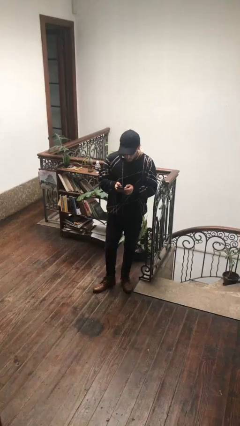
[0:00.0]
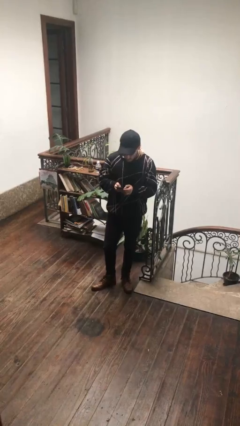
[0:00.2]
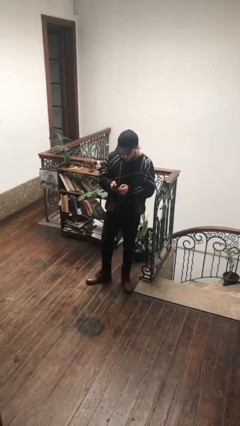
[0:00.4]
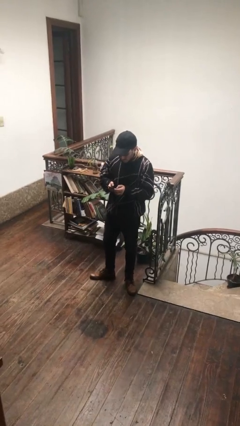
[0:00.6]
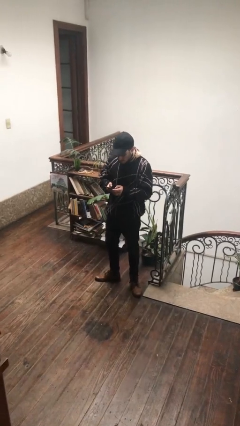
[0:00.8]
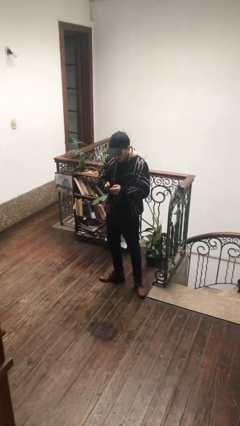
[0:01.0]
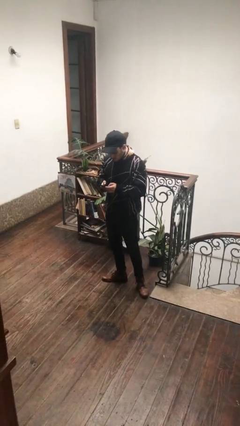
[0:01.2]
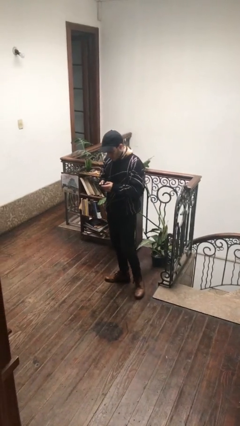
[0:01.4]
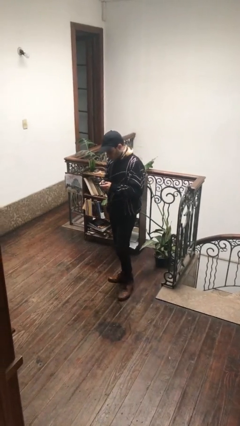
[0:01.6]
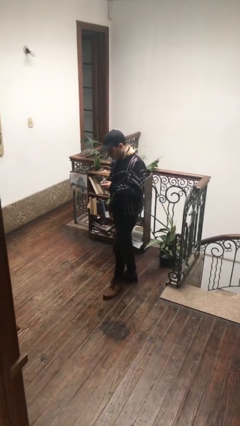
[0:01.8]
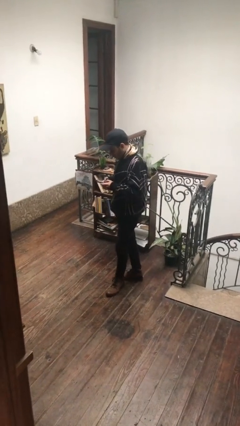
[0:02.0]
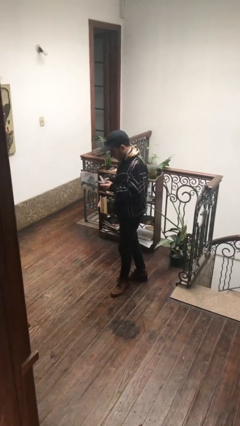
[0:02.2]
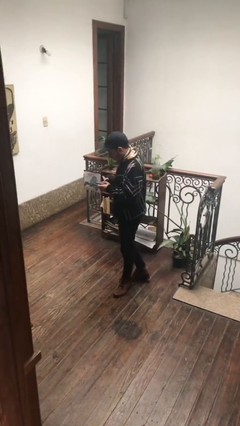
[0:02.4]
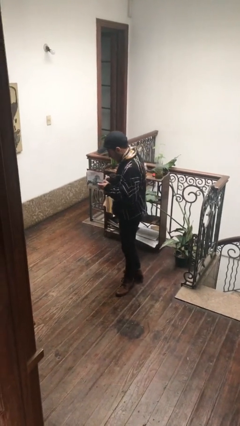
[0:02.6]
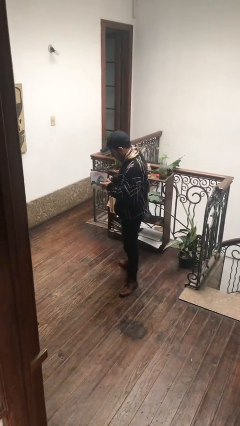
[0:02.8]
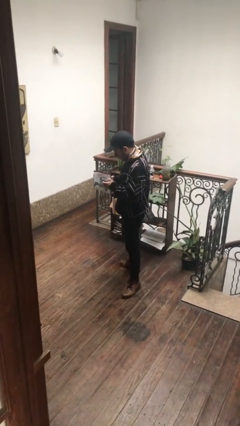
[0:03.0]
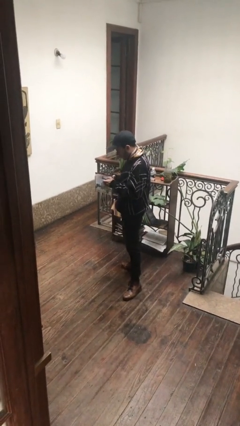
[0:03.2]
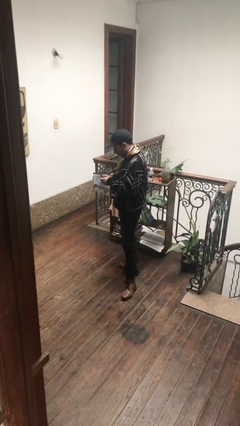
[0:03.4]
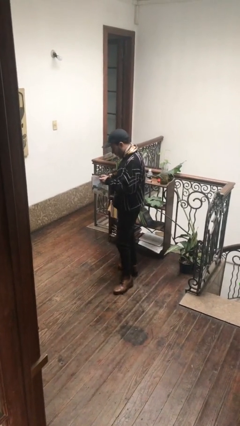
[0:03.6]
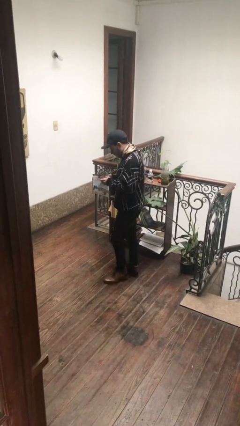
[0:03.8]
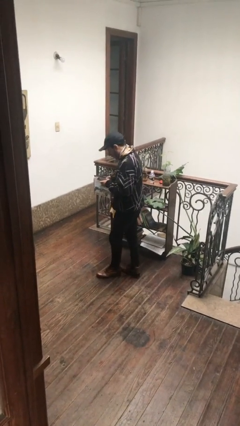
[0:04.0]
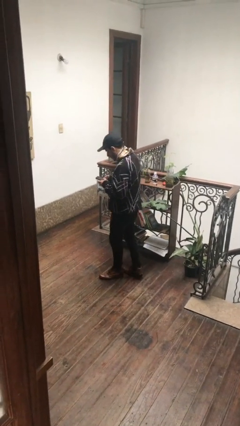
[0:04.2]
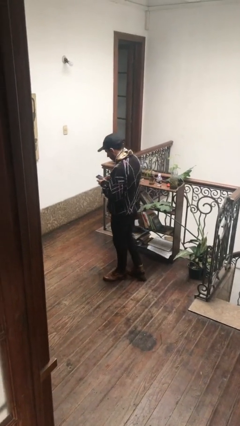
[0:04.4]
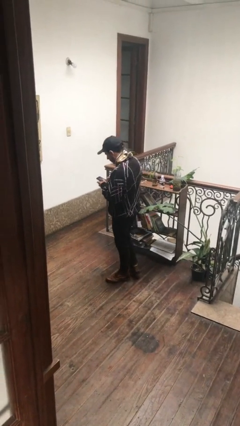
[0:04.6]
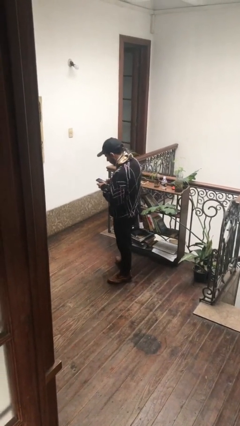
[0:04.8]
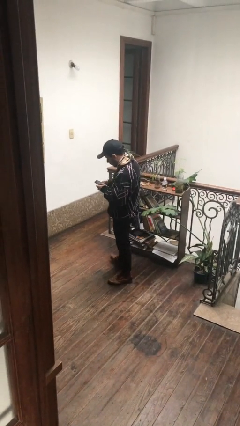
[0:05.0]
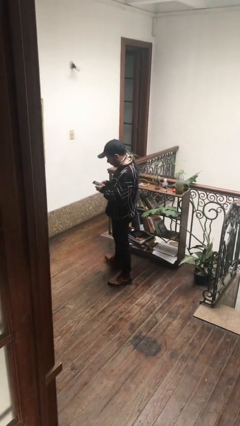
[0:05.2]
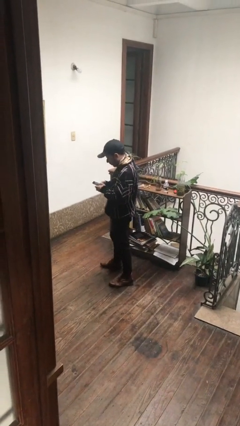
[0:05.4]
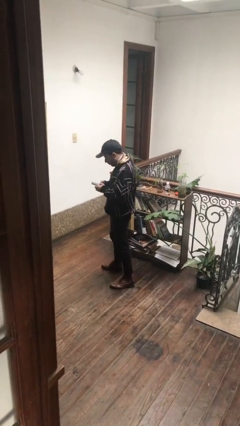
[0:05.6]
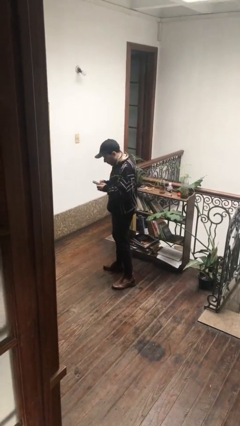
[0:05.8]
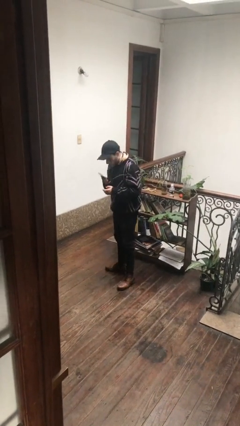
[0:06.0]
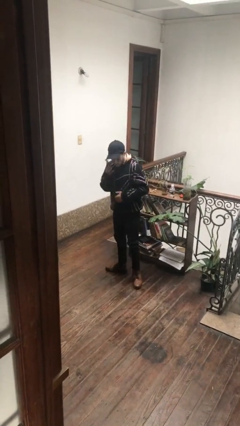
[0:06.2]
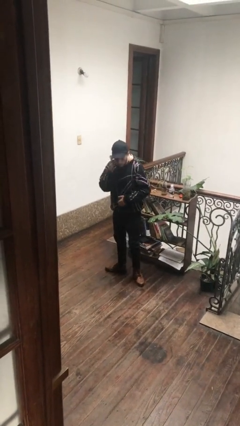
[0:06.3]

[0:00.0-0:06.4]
person texts on phone

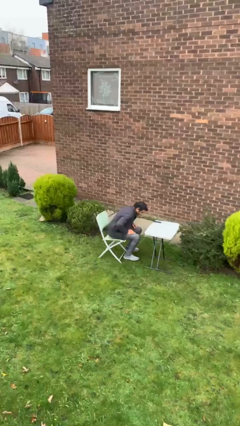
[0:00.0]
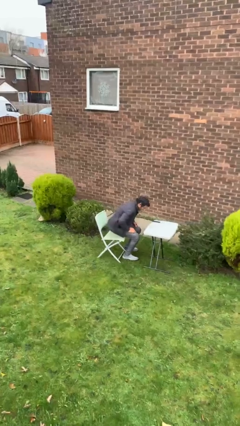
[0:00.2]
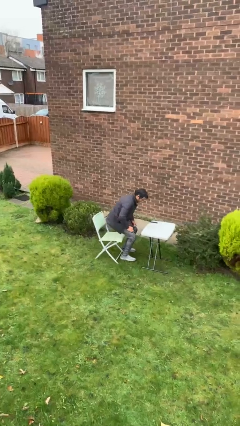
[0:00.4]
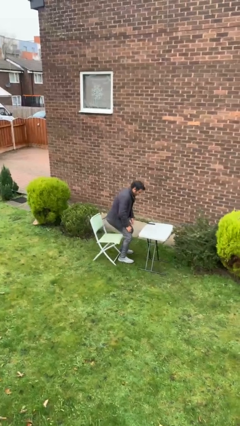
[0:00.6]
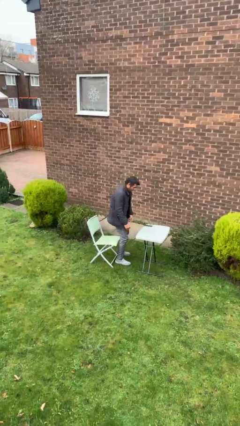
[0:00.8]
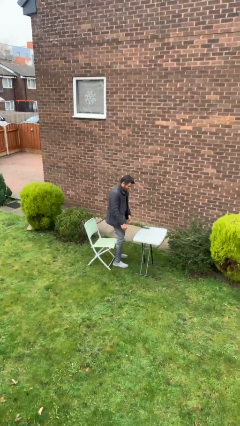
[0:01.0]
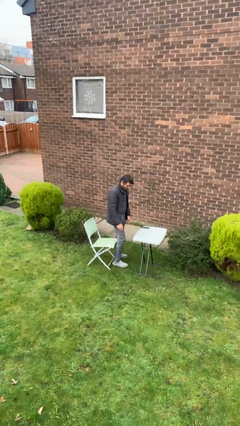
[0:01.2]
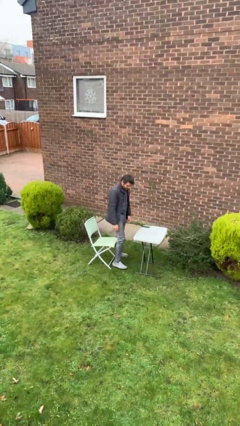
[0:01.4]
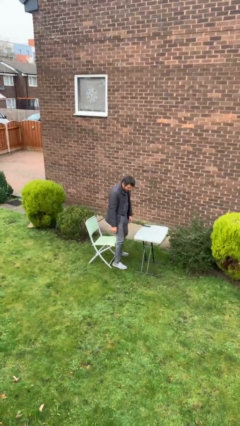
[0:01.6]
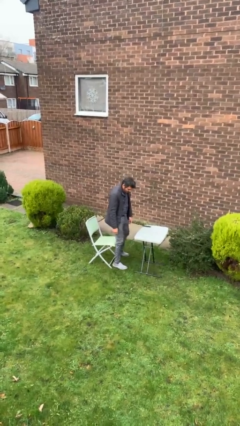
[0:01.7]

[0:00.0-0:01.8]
person stands up

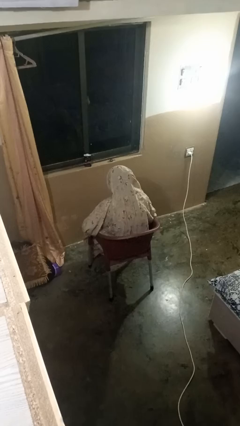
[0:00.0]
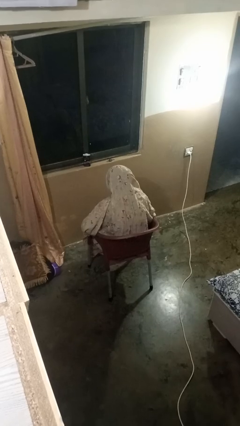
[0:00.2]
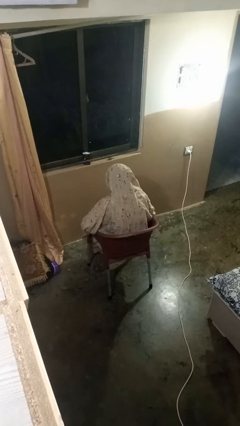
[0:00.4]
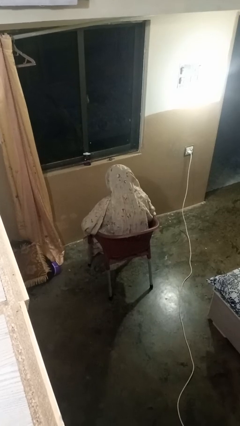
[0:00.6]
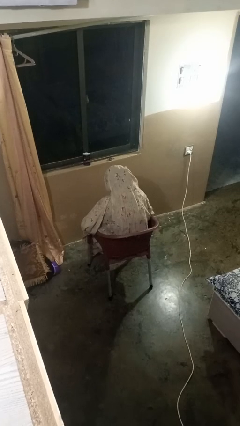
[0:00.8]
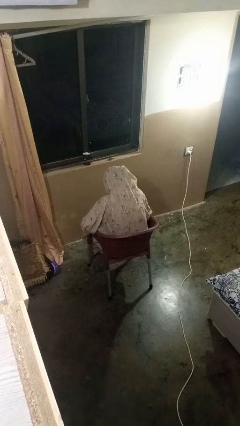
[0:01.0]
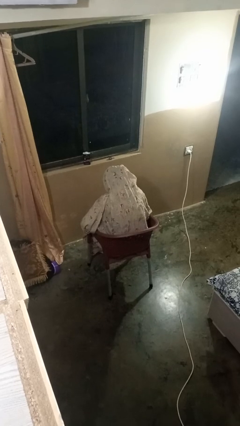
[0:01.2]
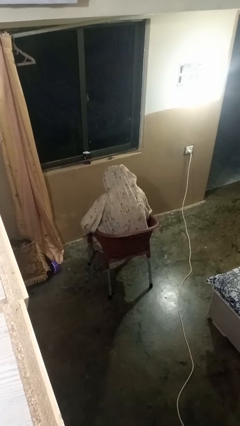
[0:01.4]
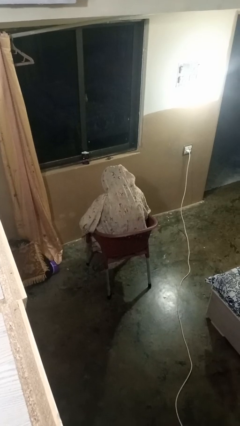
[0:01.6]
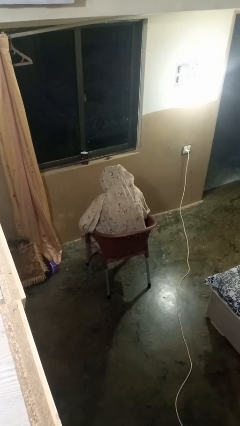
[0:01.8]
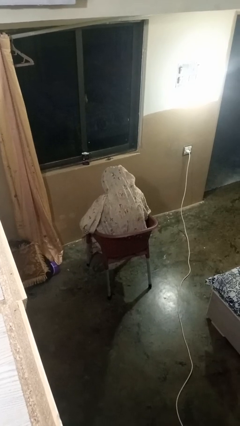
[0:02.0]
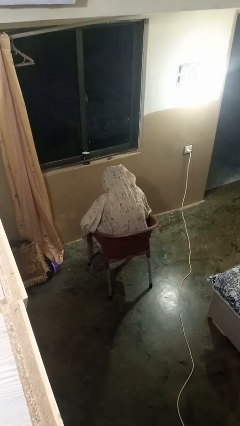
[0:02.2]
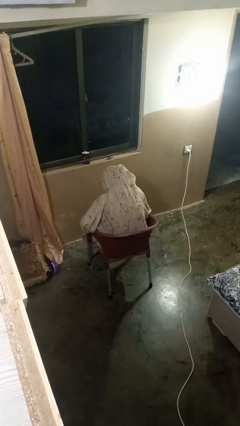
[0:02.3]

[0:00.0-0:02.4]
person looks at hands in lap

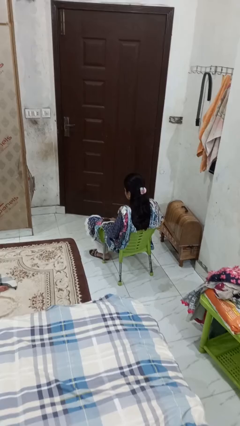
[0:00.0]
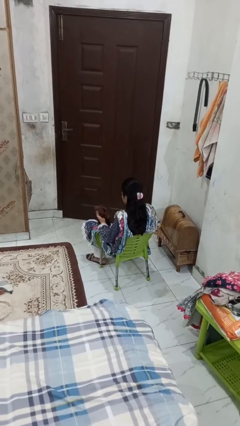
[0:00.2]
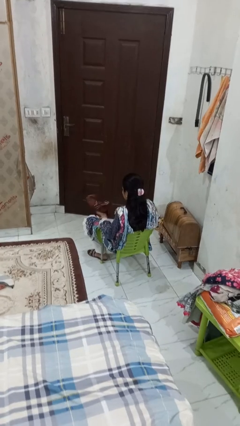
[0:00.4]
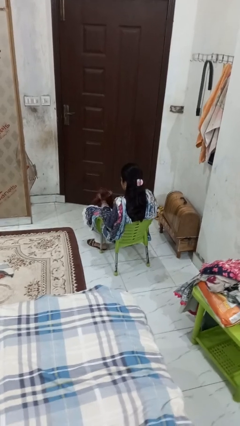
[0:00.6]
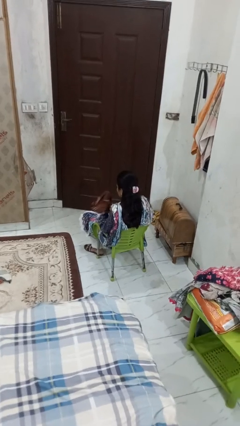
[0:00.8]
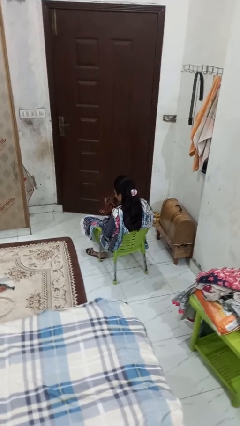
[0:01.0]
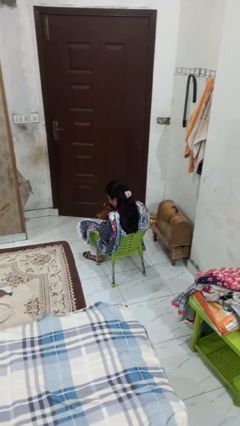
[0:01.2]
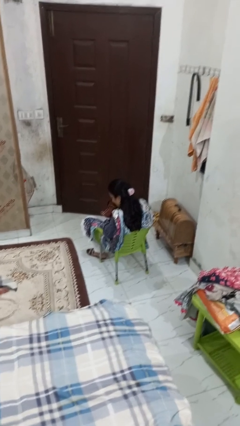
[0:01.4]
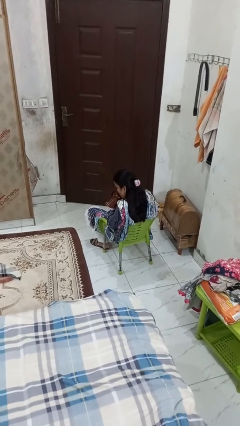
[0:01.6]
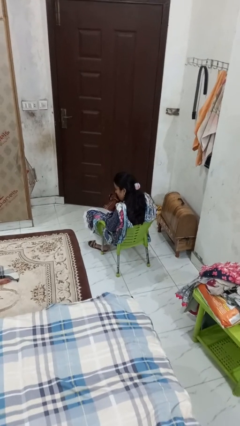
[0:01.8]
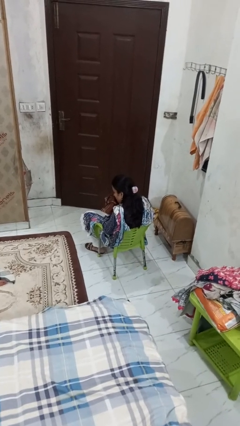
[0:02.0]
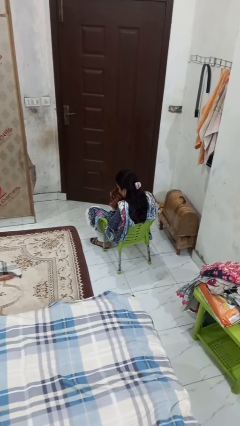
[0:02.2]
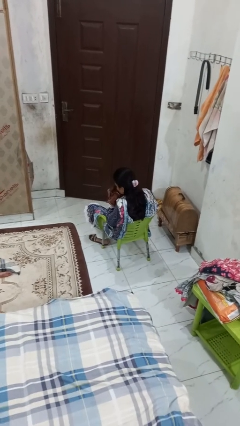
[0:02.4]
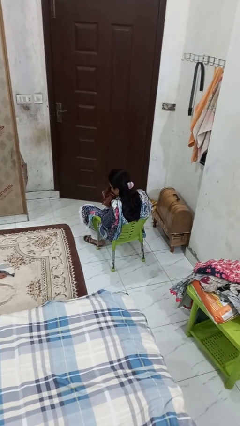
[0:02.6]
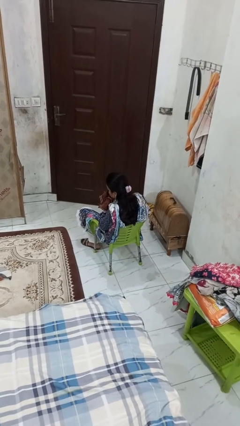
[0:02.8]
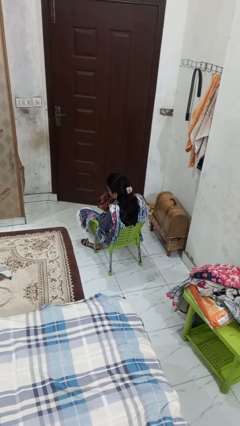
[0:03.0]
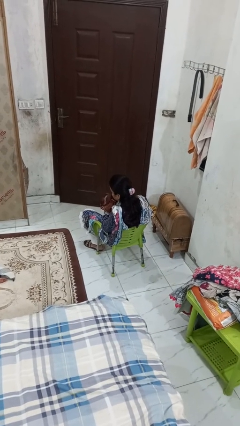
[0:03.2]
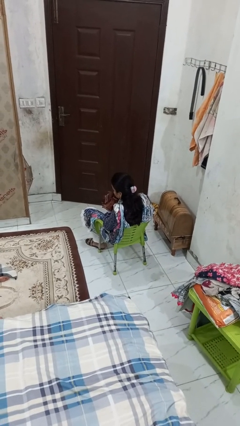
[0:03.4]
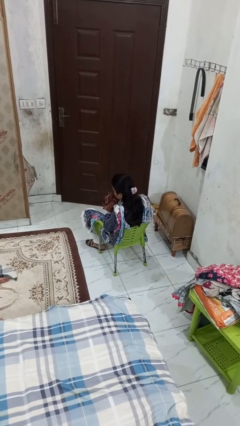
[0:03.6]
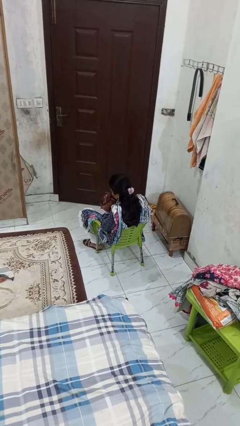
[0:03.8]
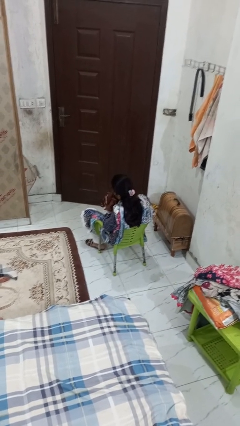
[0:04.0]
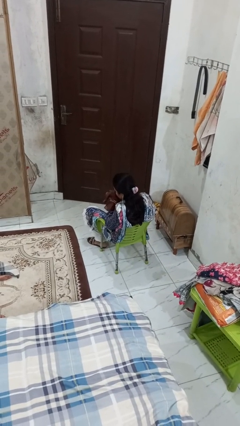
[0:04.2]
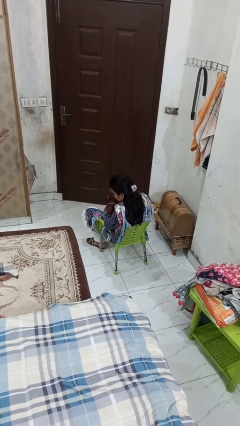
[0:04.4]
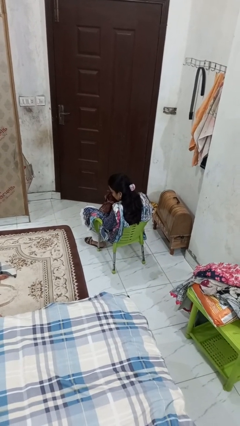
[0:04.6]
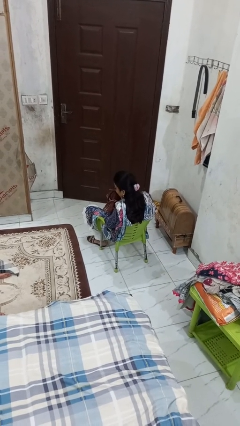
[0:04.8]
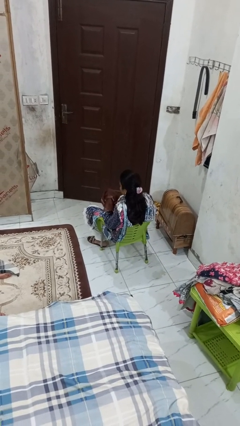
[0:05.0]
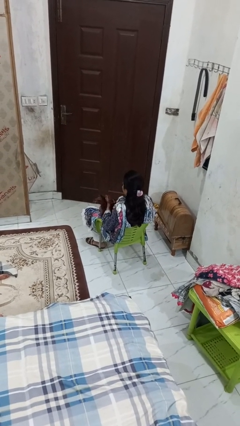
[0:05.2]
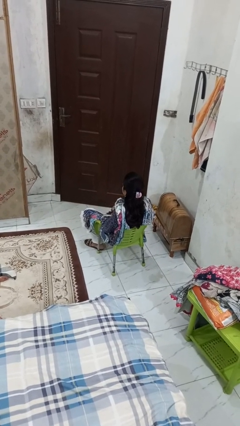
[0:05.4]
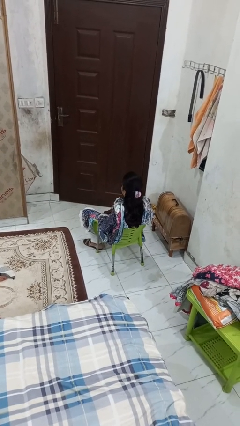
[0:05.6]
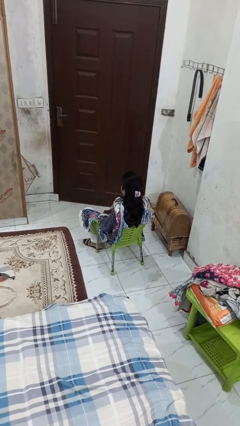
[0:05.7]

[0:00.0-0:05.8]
person blows nose

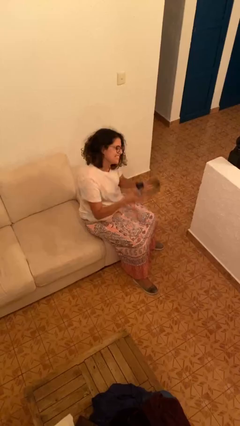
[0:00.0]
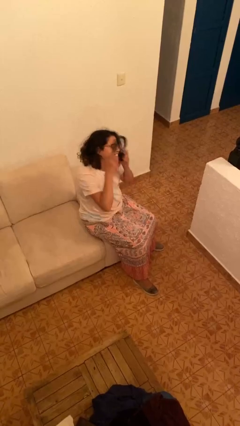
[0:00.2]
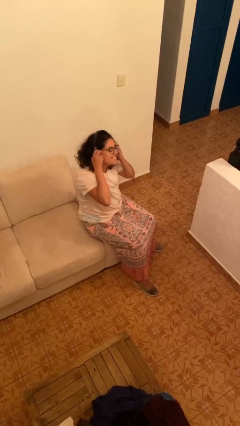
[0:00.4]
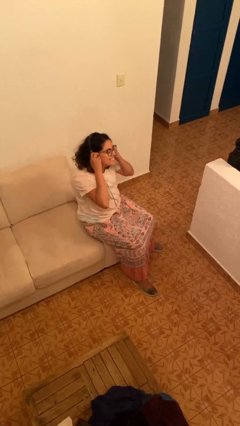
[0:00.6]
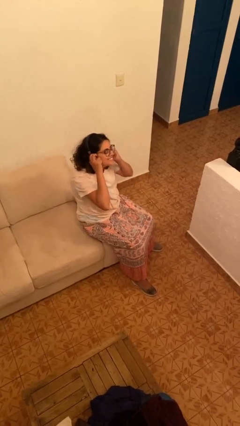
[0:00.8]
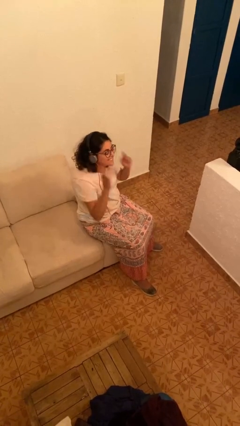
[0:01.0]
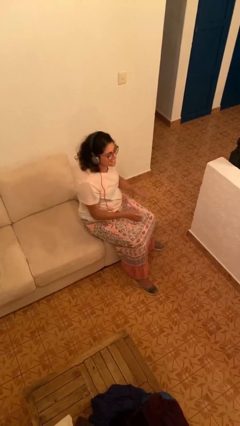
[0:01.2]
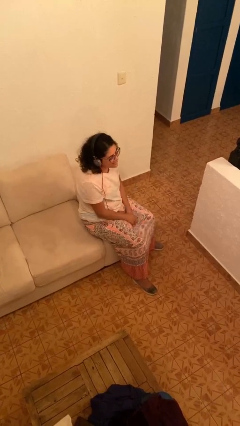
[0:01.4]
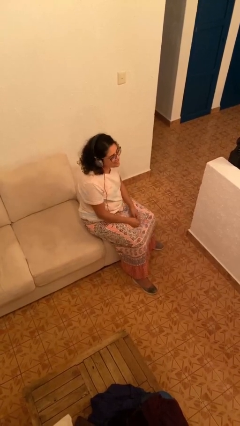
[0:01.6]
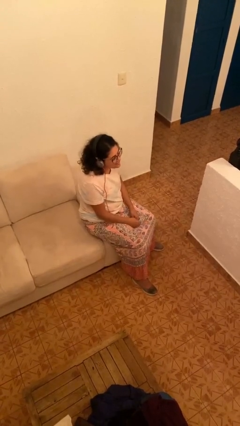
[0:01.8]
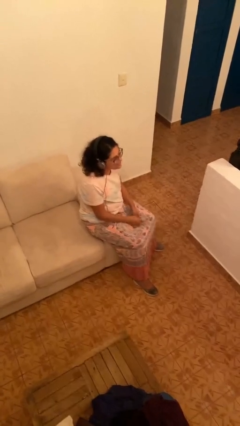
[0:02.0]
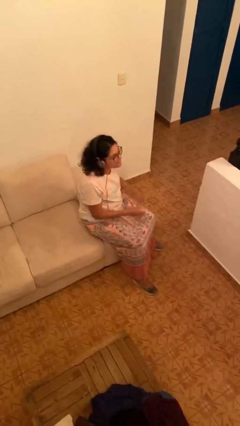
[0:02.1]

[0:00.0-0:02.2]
person puts on headphones
